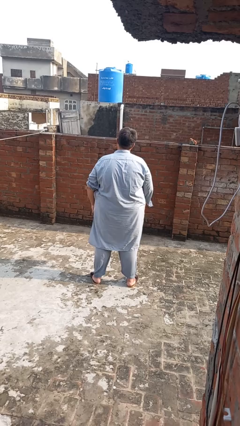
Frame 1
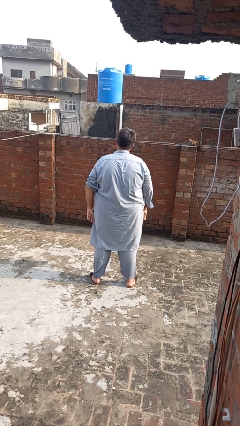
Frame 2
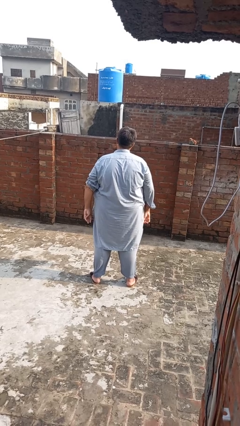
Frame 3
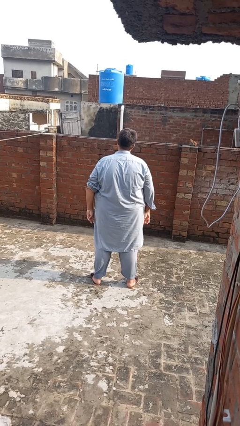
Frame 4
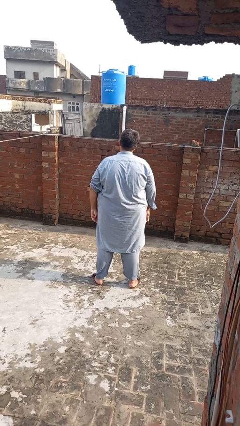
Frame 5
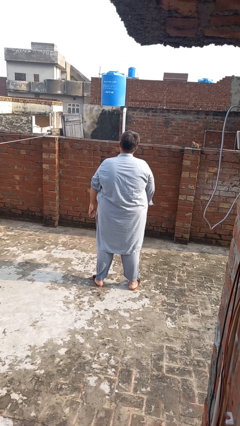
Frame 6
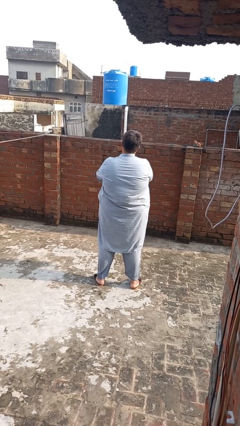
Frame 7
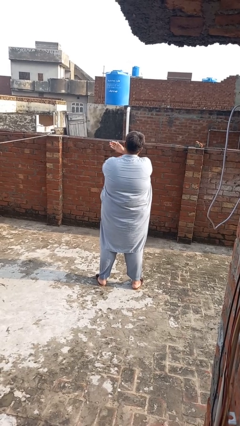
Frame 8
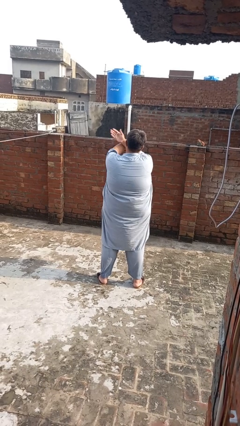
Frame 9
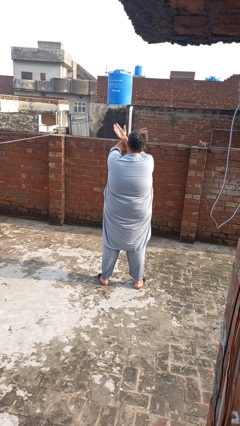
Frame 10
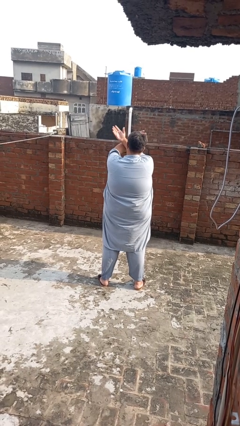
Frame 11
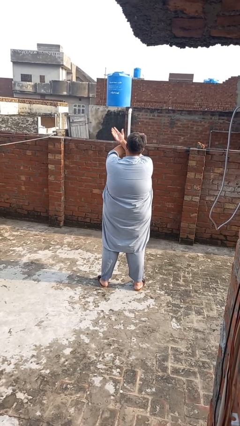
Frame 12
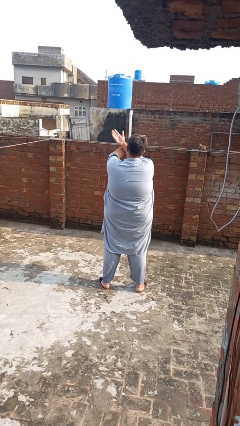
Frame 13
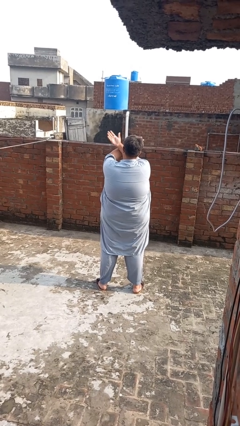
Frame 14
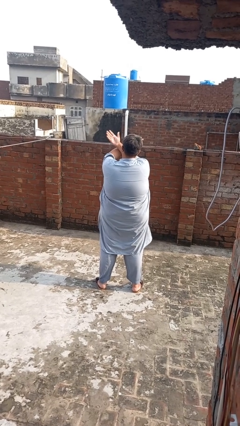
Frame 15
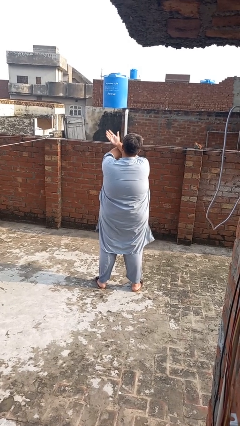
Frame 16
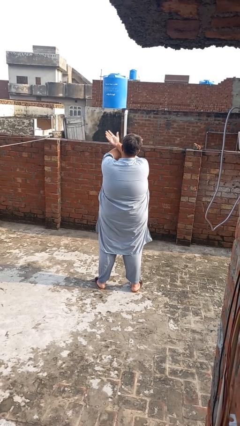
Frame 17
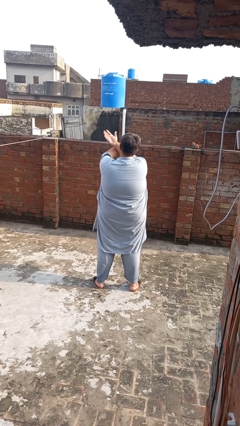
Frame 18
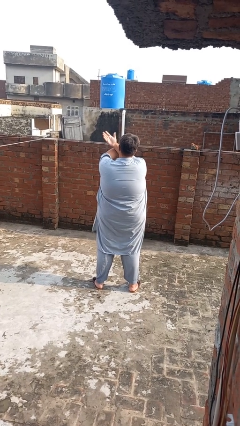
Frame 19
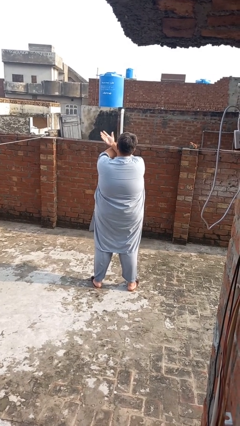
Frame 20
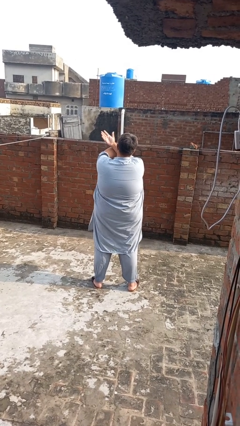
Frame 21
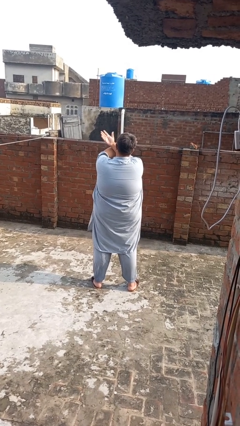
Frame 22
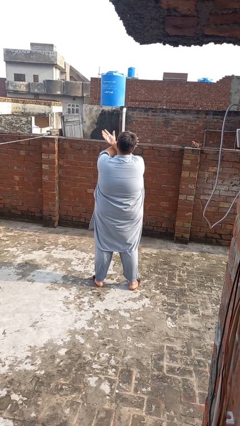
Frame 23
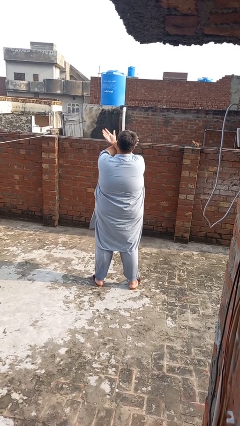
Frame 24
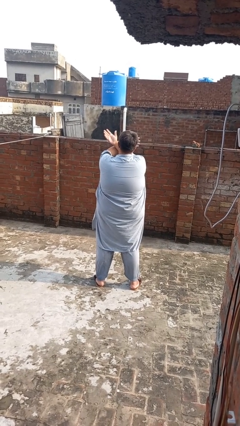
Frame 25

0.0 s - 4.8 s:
person gestures arms x

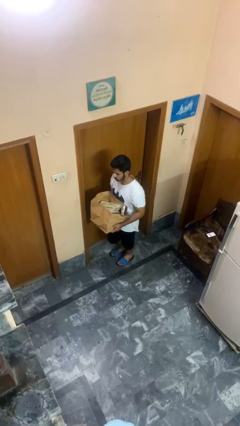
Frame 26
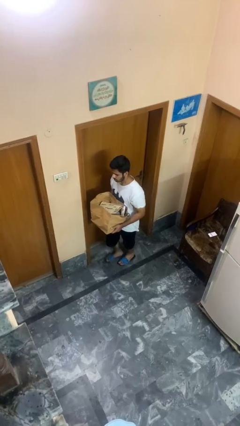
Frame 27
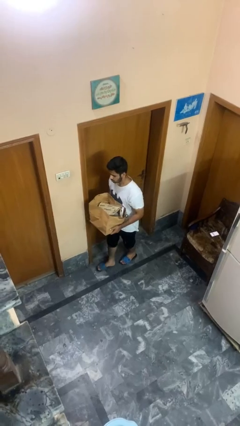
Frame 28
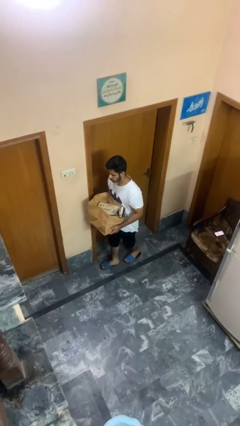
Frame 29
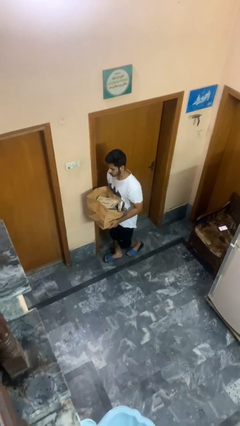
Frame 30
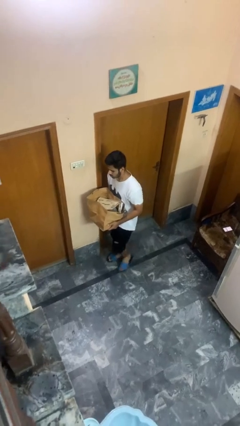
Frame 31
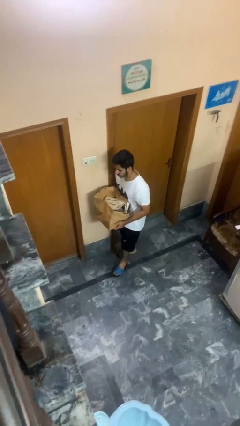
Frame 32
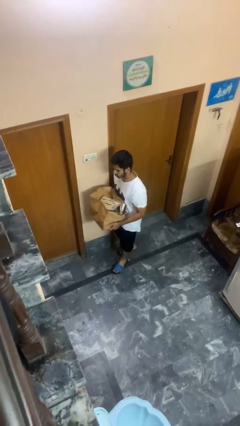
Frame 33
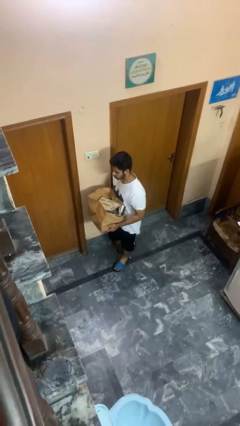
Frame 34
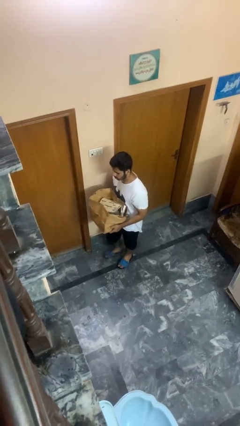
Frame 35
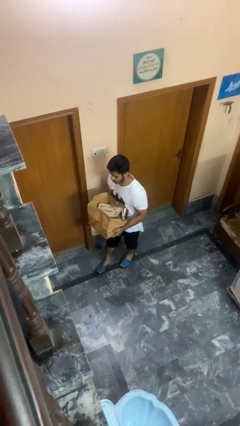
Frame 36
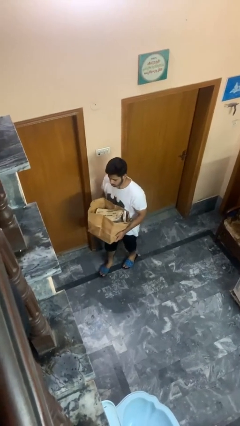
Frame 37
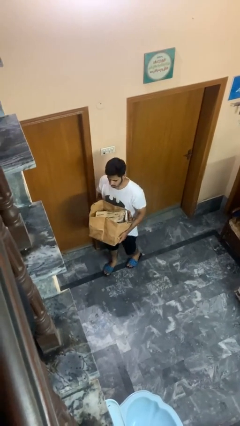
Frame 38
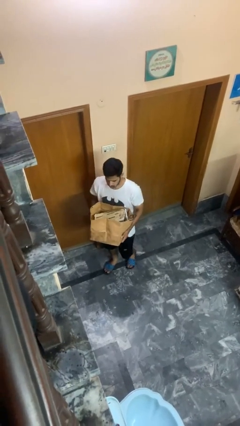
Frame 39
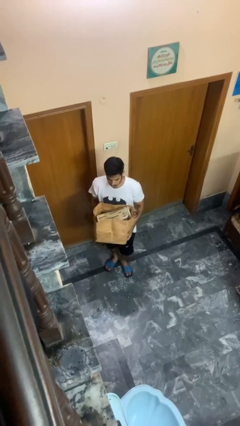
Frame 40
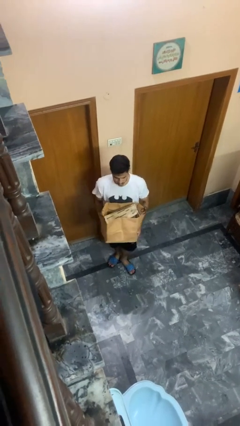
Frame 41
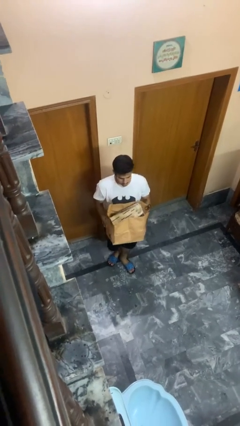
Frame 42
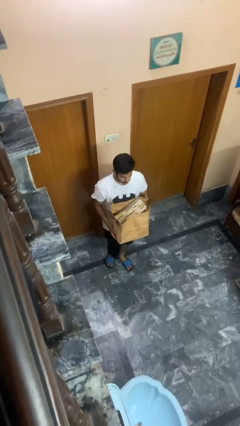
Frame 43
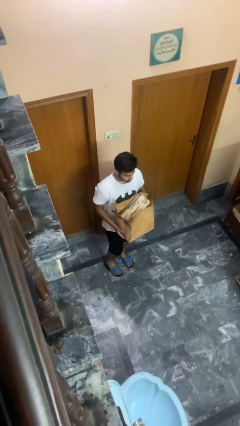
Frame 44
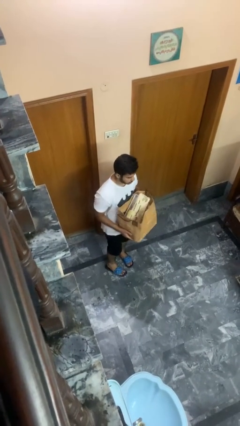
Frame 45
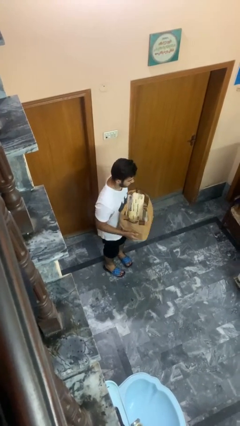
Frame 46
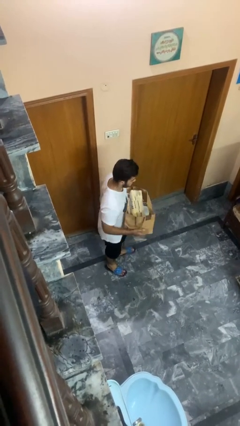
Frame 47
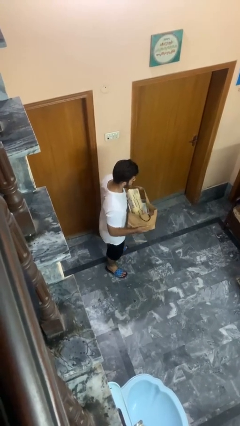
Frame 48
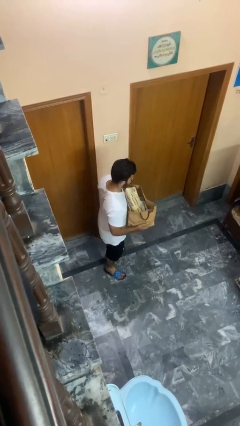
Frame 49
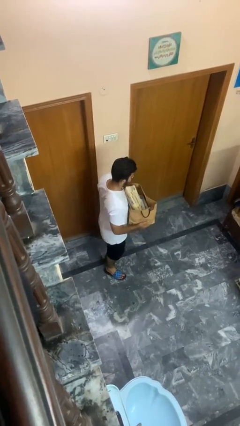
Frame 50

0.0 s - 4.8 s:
person carries groceries

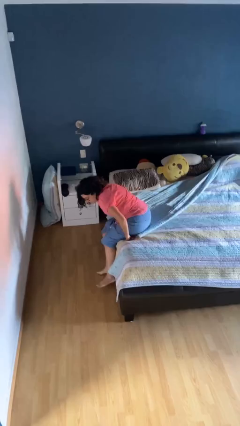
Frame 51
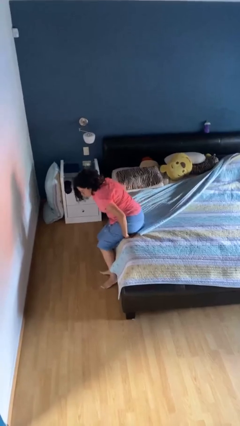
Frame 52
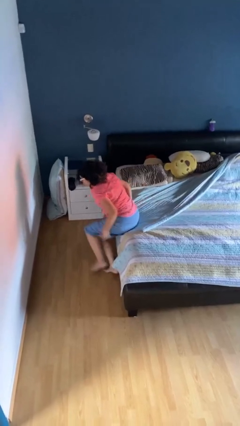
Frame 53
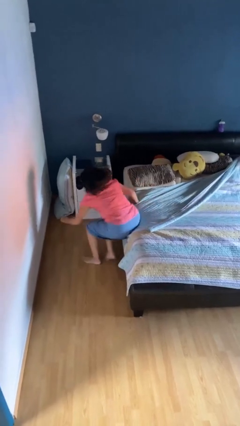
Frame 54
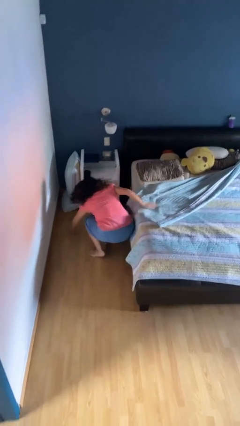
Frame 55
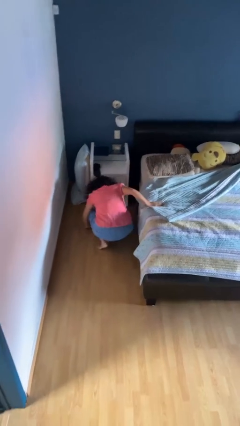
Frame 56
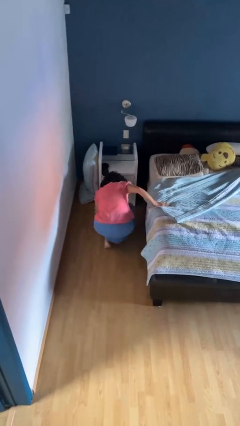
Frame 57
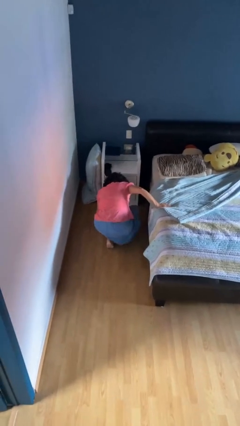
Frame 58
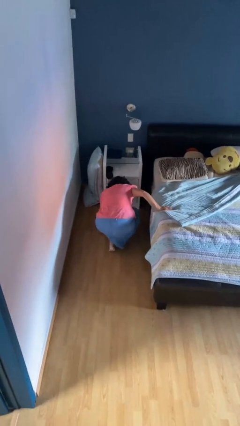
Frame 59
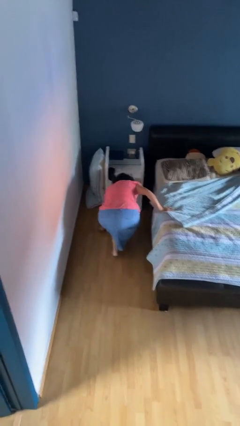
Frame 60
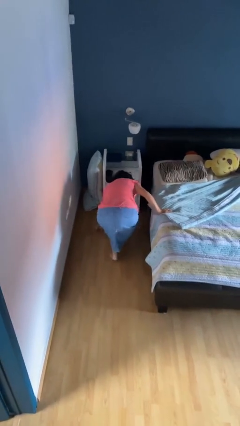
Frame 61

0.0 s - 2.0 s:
person falls from bed

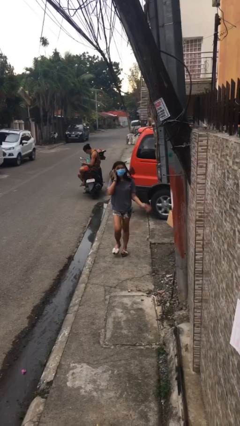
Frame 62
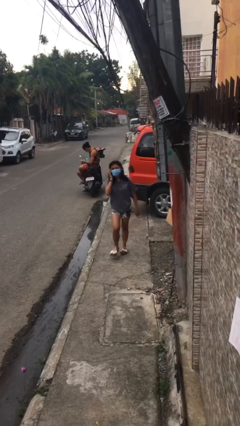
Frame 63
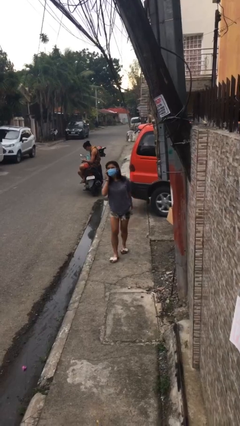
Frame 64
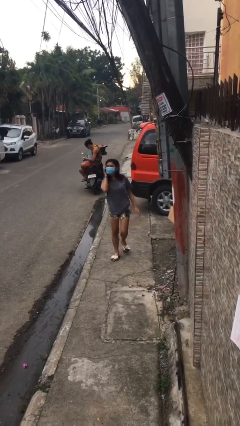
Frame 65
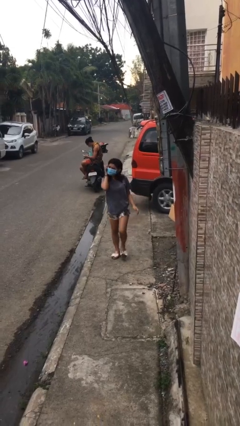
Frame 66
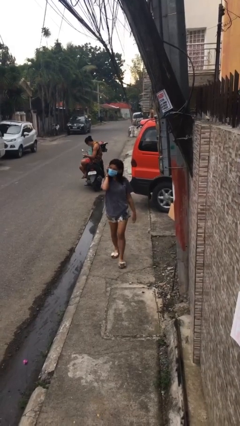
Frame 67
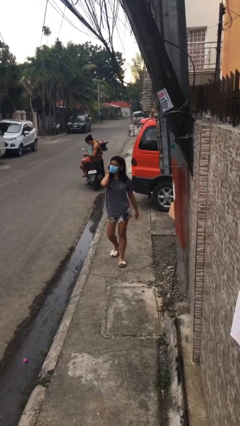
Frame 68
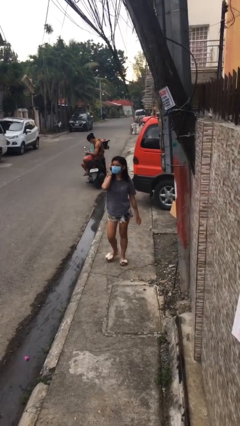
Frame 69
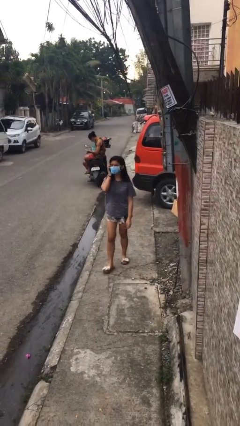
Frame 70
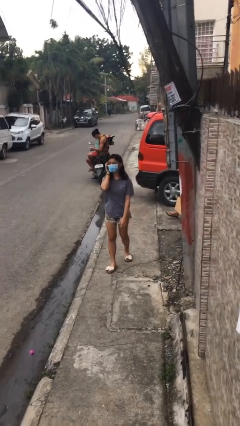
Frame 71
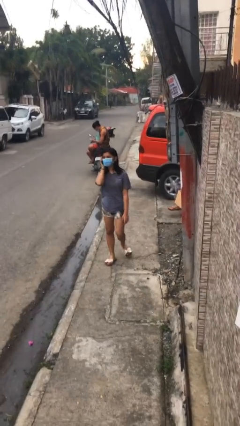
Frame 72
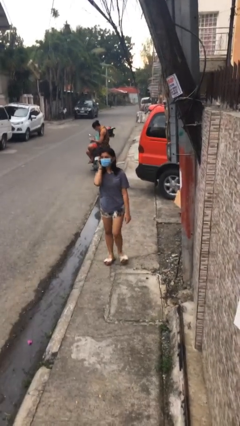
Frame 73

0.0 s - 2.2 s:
person talks on phone

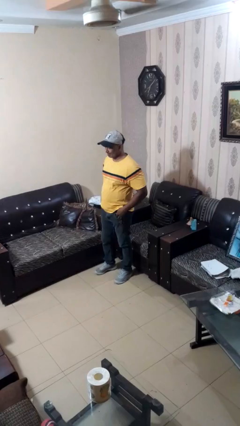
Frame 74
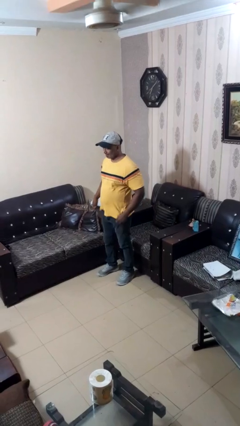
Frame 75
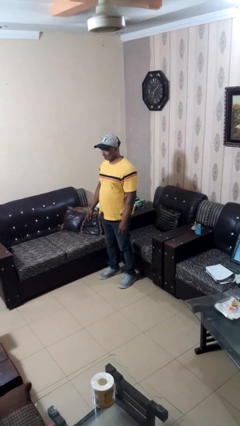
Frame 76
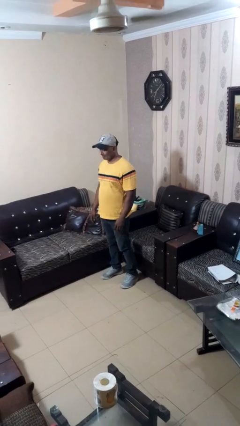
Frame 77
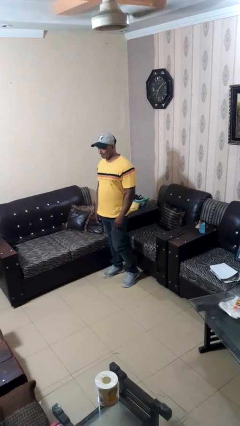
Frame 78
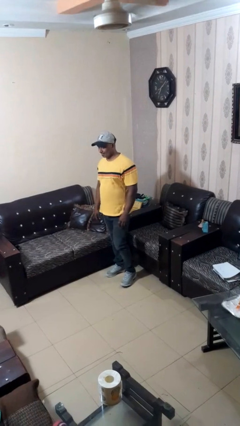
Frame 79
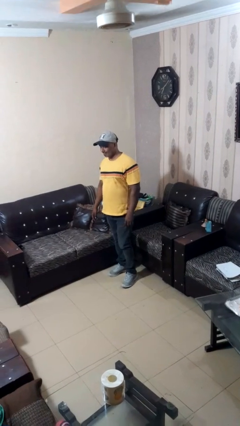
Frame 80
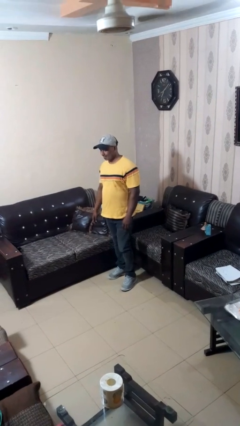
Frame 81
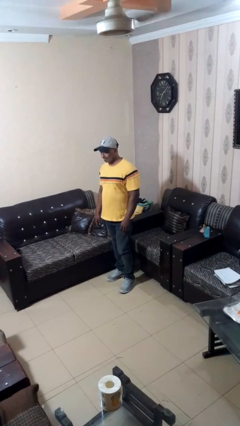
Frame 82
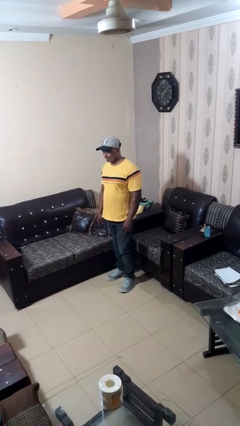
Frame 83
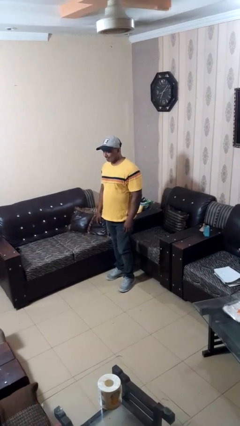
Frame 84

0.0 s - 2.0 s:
person puts hands in back pockets

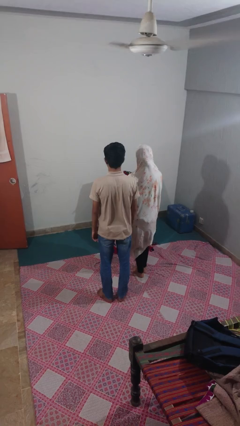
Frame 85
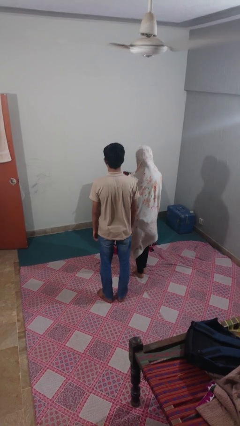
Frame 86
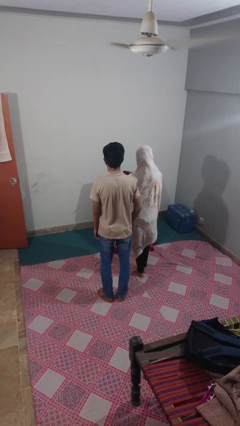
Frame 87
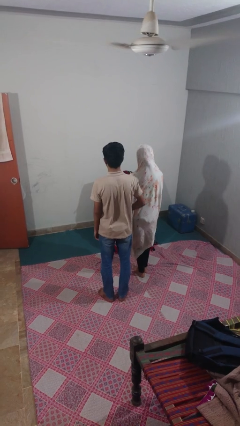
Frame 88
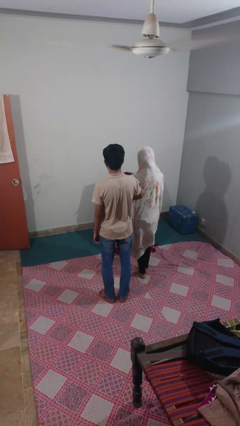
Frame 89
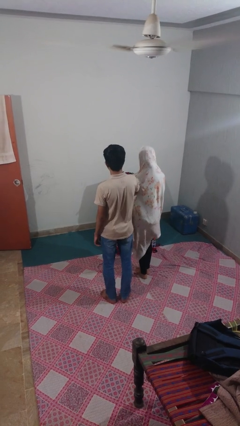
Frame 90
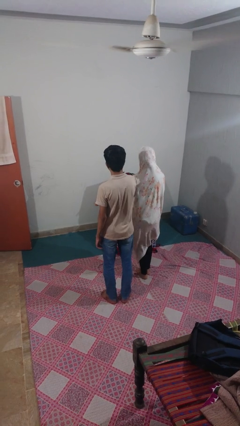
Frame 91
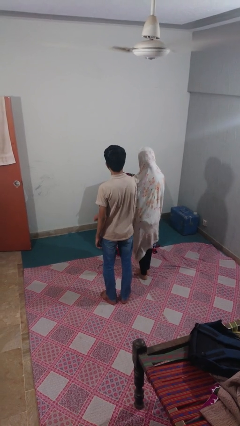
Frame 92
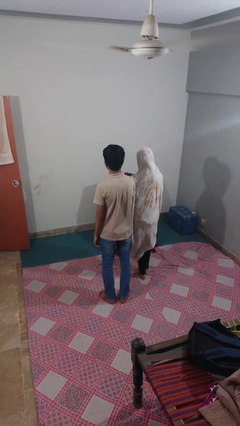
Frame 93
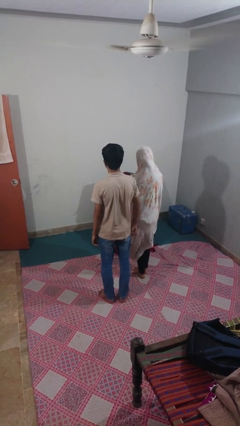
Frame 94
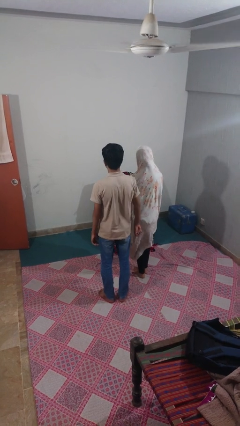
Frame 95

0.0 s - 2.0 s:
person nudges person with elbow
